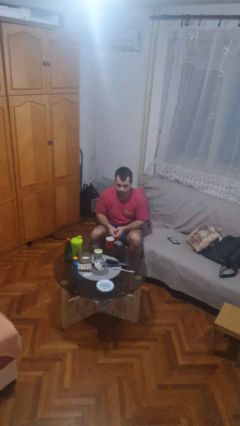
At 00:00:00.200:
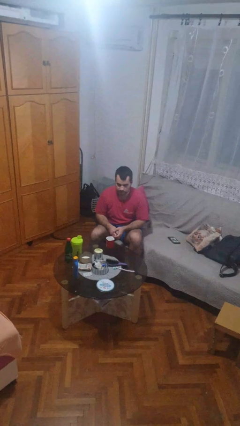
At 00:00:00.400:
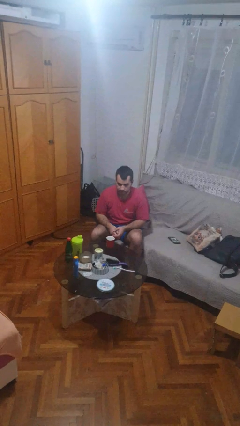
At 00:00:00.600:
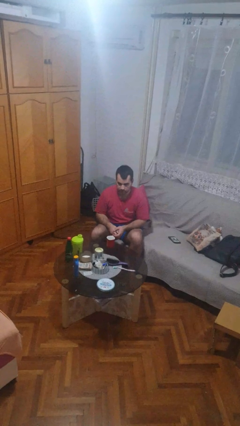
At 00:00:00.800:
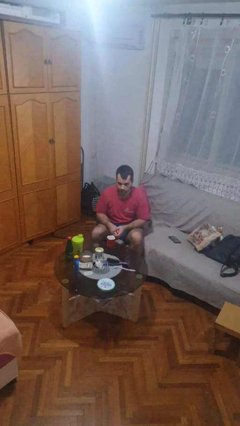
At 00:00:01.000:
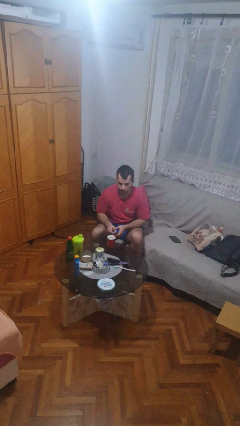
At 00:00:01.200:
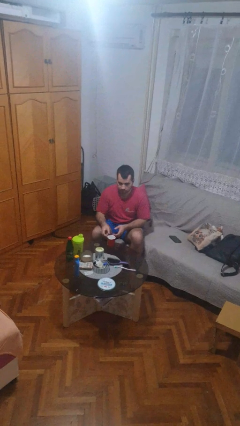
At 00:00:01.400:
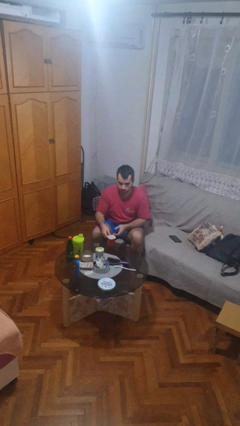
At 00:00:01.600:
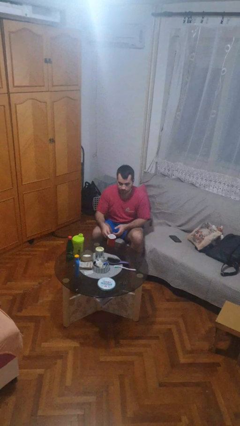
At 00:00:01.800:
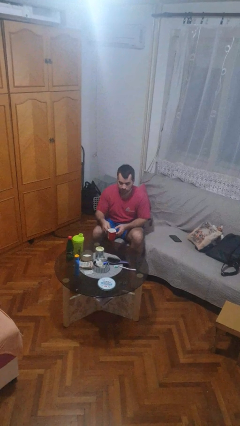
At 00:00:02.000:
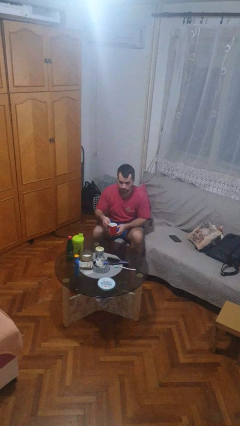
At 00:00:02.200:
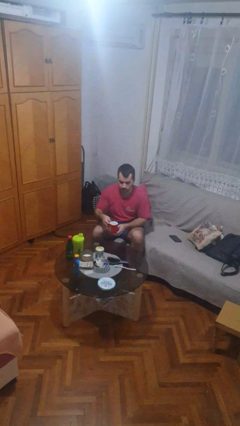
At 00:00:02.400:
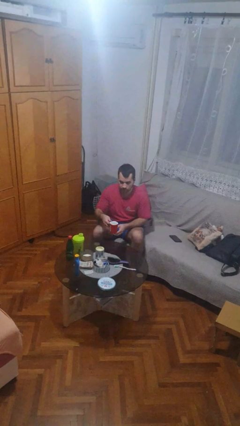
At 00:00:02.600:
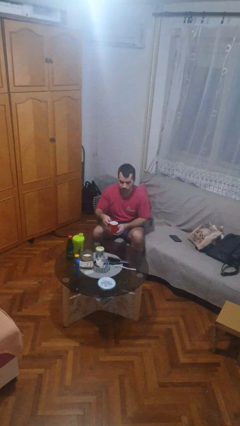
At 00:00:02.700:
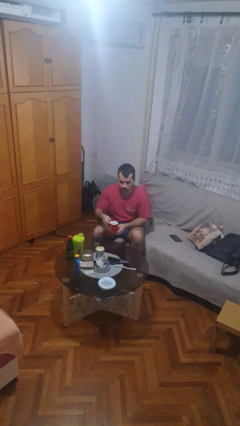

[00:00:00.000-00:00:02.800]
person picks up object from table

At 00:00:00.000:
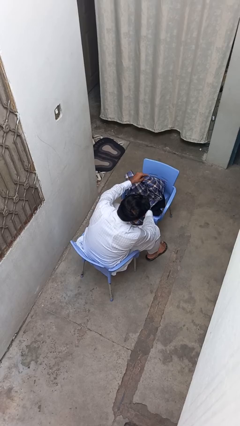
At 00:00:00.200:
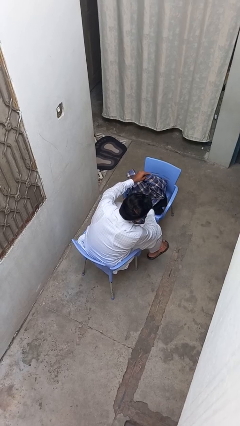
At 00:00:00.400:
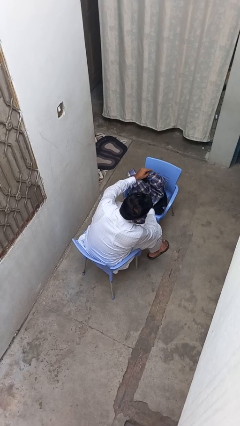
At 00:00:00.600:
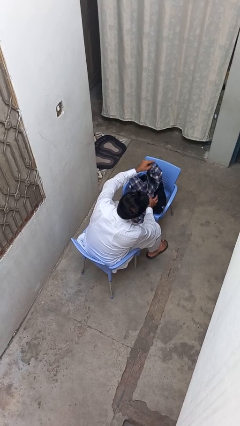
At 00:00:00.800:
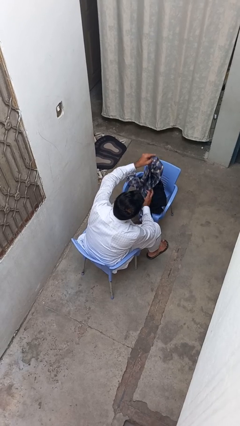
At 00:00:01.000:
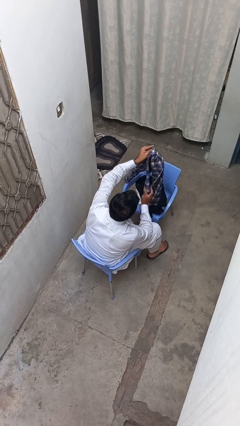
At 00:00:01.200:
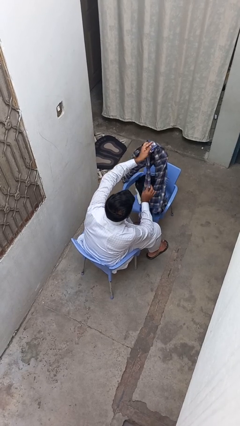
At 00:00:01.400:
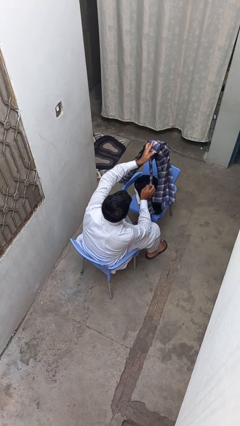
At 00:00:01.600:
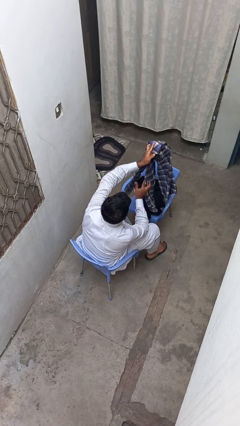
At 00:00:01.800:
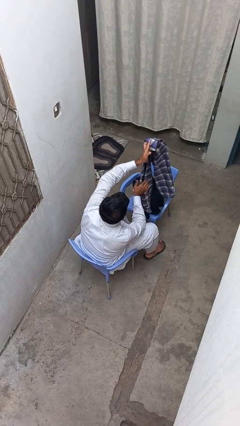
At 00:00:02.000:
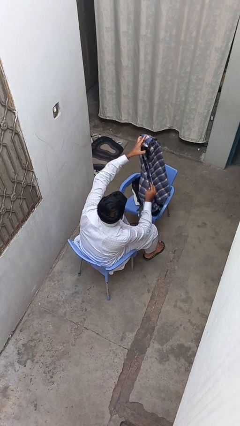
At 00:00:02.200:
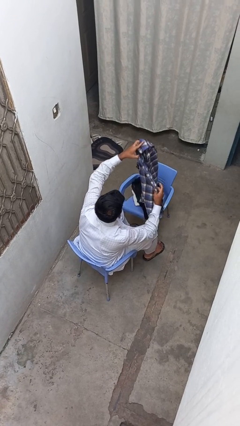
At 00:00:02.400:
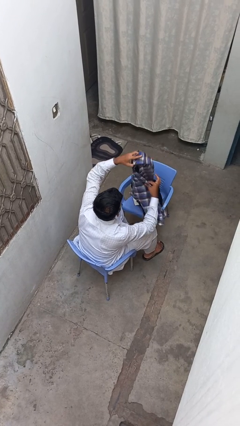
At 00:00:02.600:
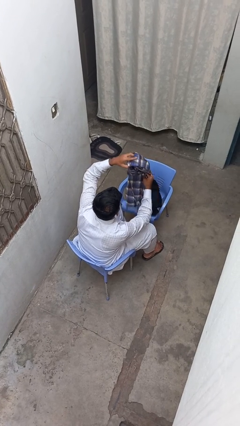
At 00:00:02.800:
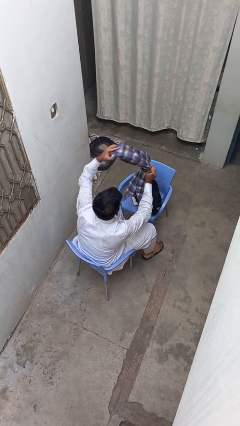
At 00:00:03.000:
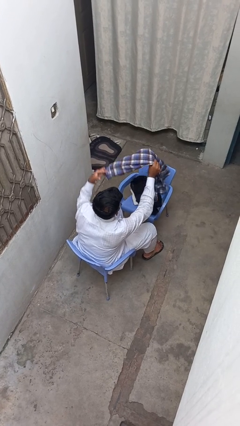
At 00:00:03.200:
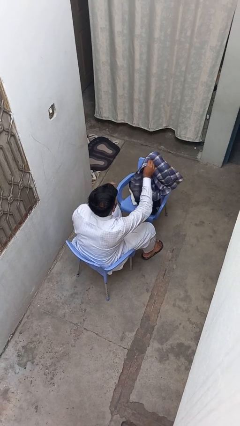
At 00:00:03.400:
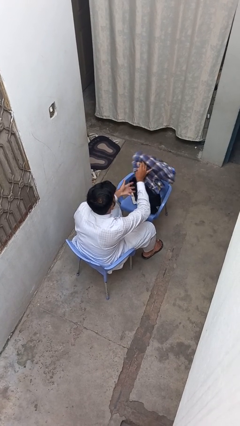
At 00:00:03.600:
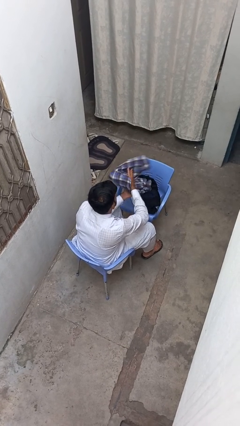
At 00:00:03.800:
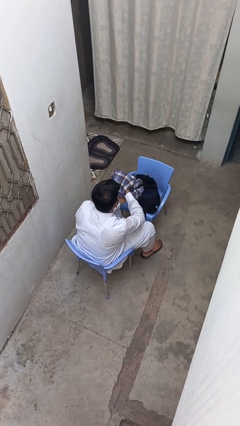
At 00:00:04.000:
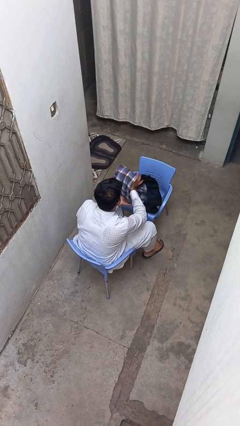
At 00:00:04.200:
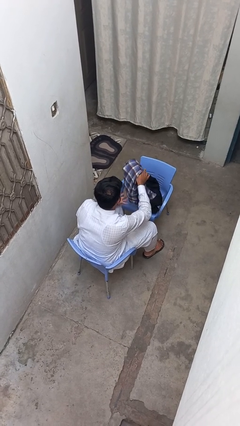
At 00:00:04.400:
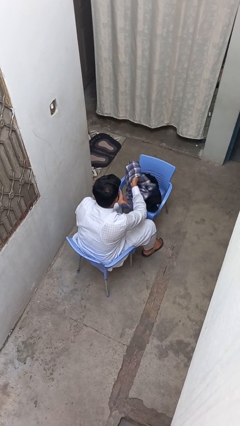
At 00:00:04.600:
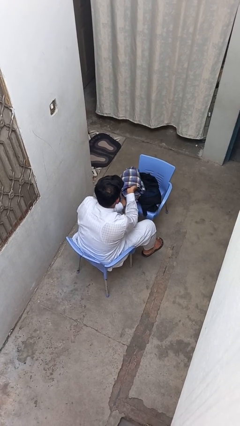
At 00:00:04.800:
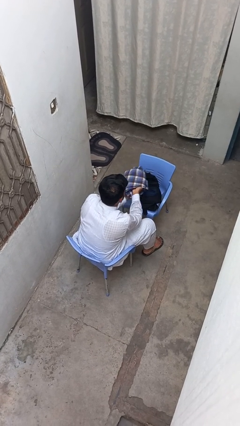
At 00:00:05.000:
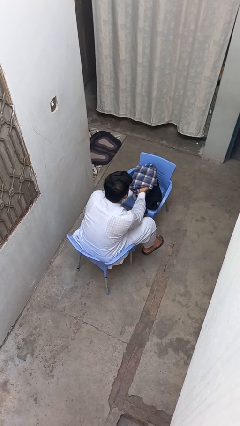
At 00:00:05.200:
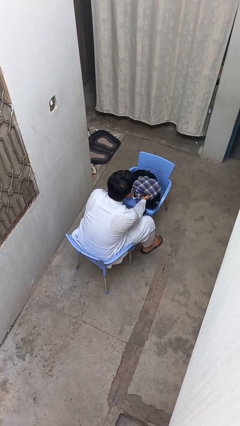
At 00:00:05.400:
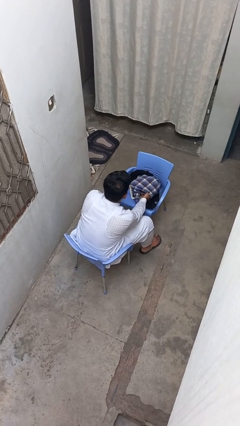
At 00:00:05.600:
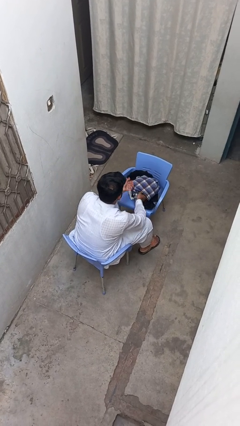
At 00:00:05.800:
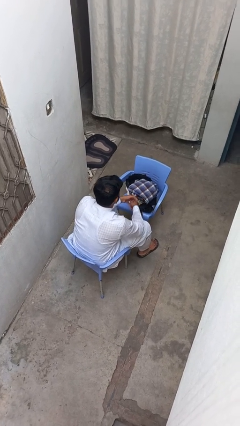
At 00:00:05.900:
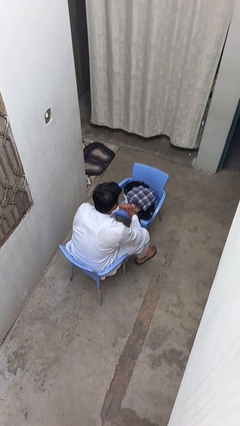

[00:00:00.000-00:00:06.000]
person folds shirt

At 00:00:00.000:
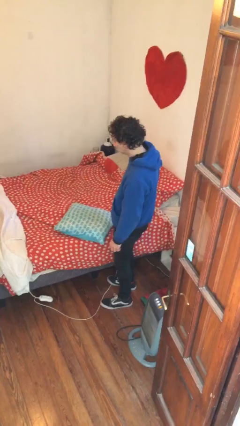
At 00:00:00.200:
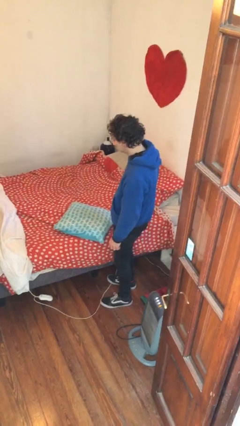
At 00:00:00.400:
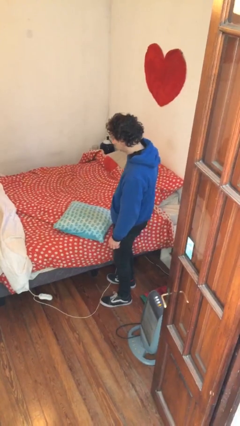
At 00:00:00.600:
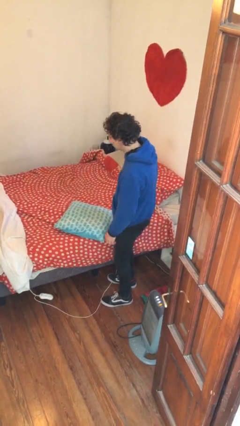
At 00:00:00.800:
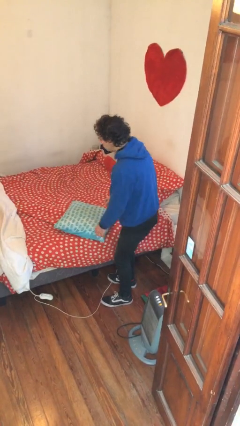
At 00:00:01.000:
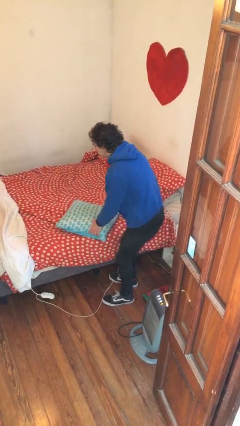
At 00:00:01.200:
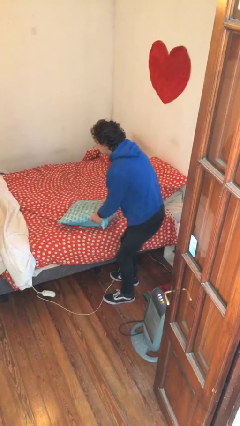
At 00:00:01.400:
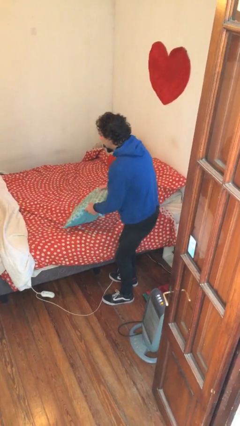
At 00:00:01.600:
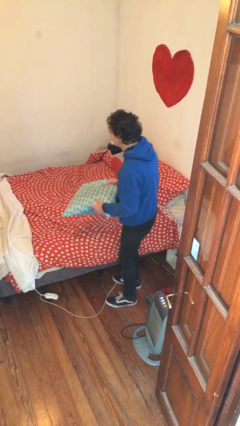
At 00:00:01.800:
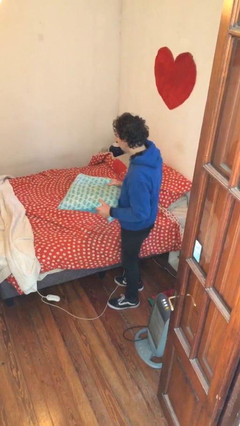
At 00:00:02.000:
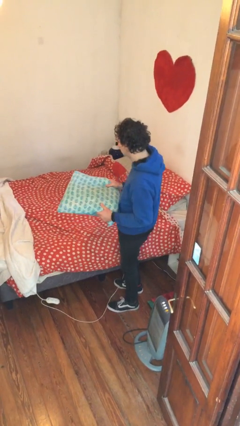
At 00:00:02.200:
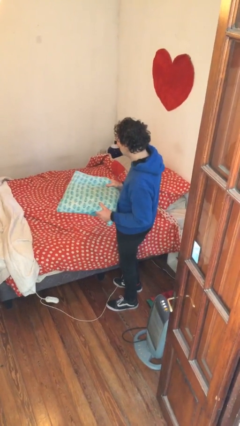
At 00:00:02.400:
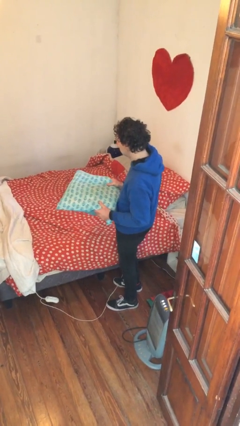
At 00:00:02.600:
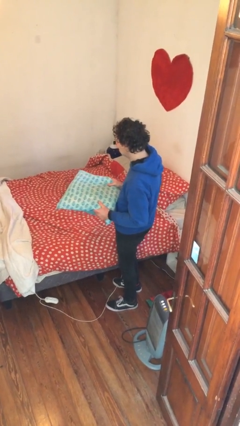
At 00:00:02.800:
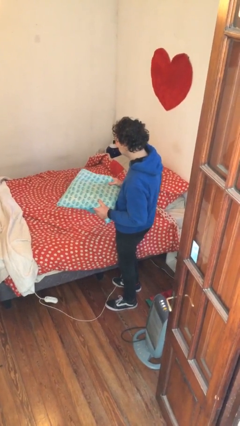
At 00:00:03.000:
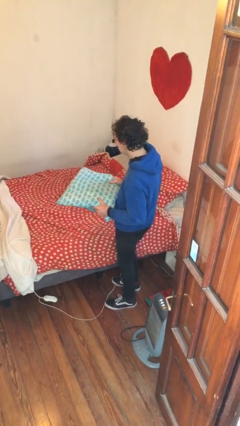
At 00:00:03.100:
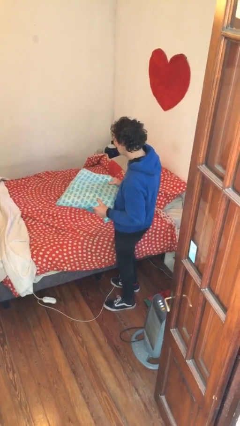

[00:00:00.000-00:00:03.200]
person picks up object from bed

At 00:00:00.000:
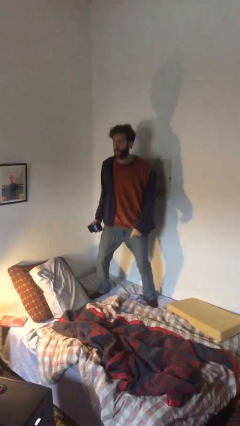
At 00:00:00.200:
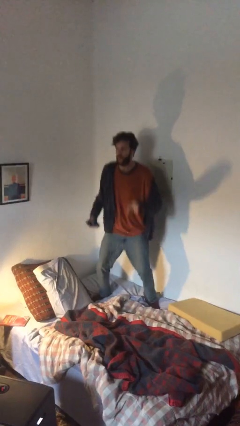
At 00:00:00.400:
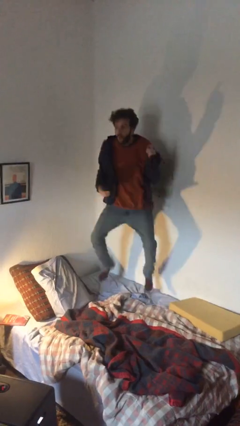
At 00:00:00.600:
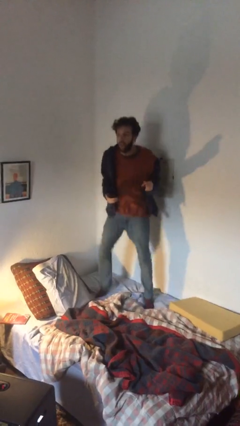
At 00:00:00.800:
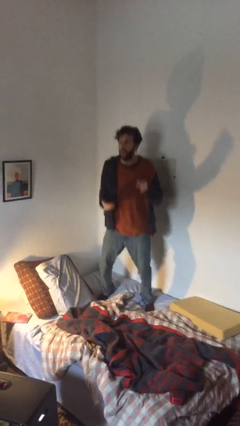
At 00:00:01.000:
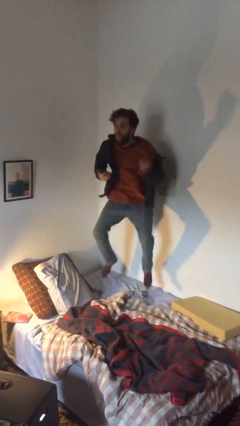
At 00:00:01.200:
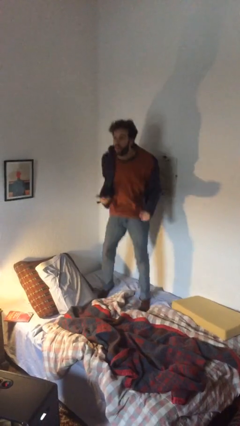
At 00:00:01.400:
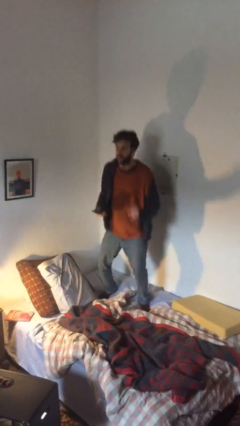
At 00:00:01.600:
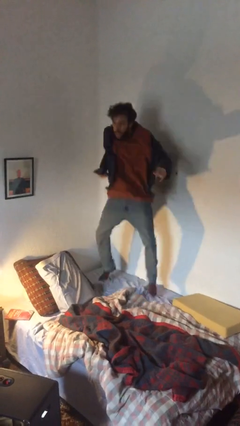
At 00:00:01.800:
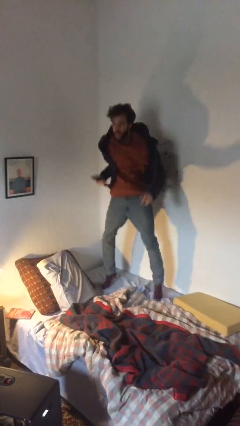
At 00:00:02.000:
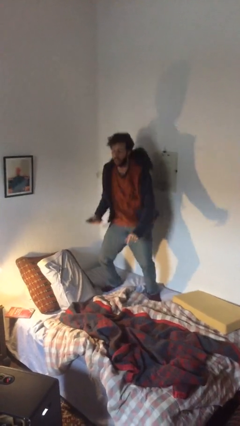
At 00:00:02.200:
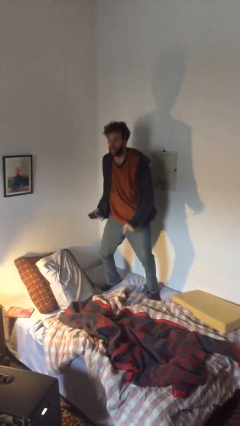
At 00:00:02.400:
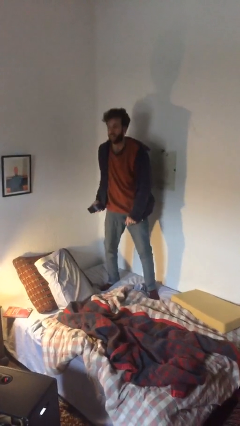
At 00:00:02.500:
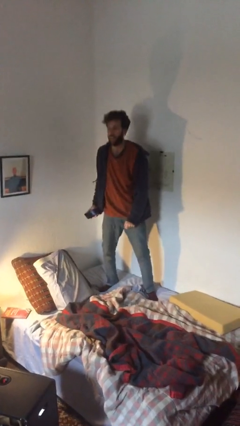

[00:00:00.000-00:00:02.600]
person jumps on bed

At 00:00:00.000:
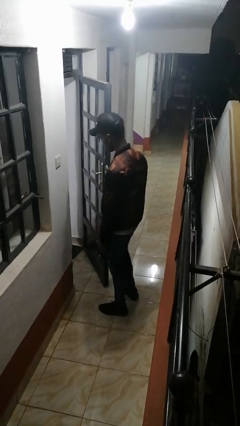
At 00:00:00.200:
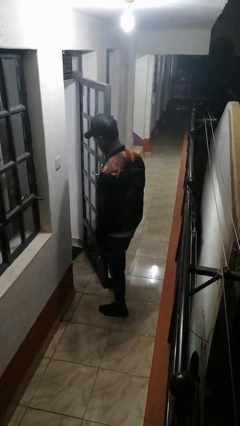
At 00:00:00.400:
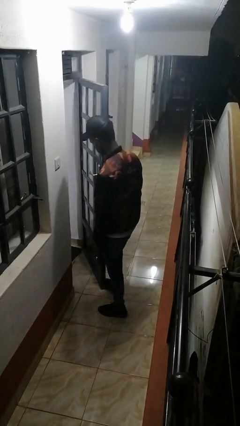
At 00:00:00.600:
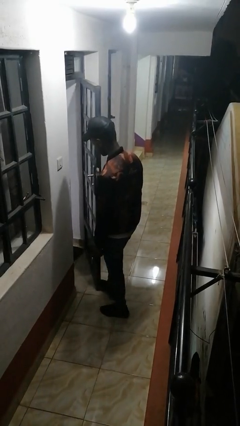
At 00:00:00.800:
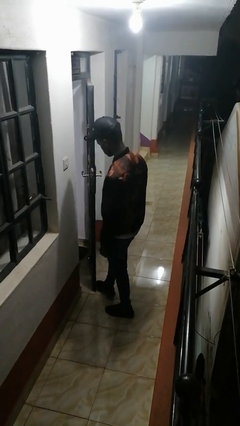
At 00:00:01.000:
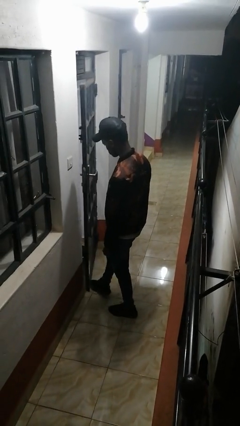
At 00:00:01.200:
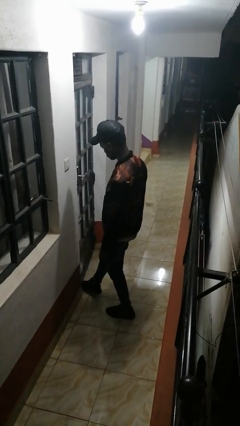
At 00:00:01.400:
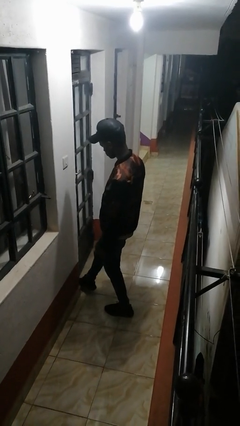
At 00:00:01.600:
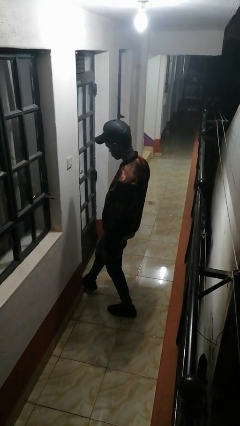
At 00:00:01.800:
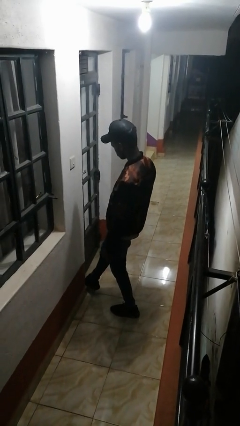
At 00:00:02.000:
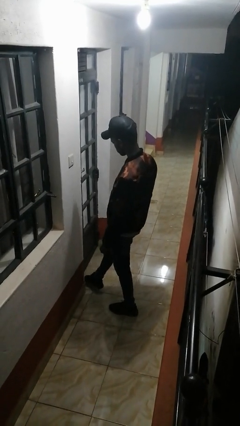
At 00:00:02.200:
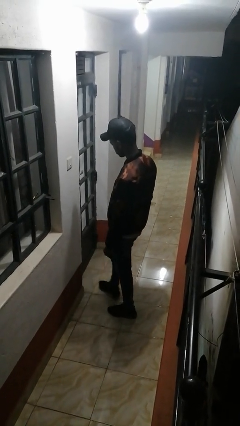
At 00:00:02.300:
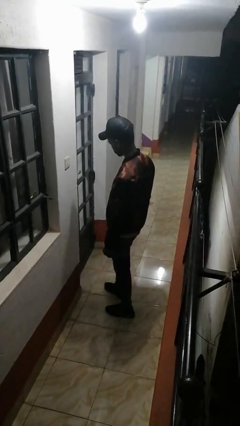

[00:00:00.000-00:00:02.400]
person closes door with foot

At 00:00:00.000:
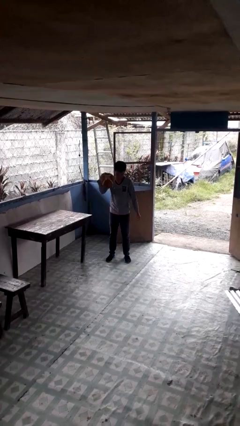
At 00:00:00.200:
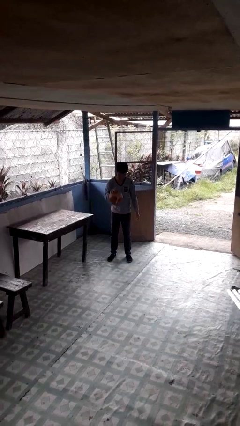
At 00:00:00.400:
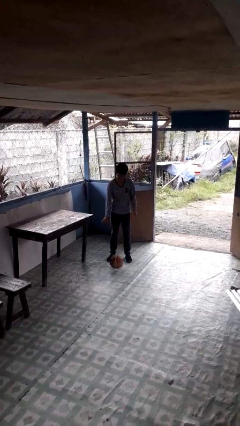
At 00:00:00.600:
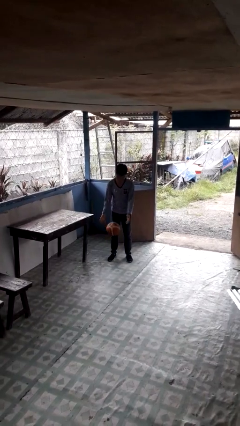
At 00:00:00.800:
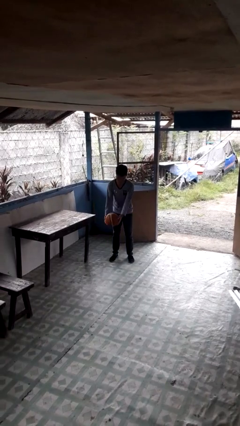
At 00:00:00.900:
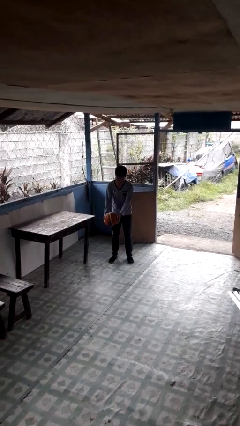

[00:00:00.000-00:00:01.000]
person bounces ball on floor
